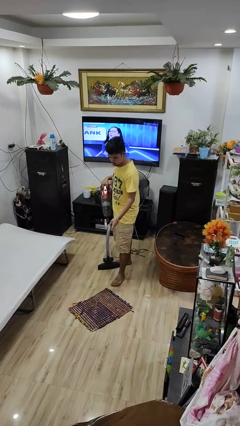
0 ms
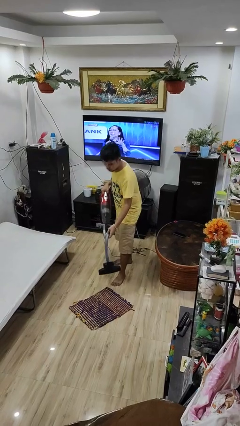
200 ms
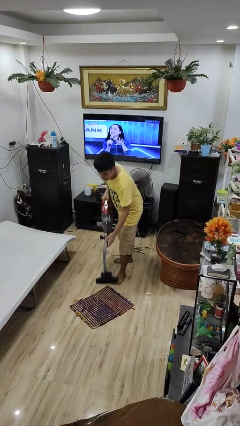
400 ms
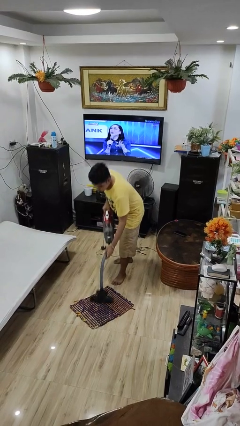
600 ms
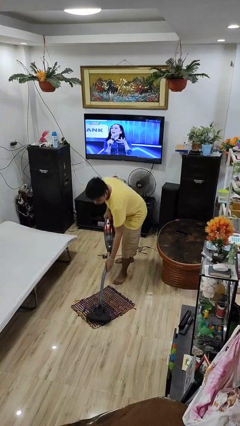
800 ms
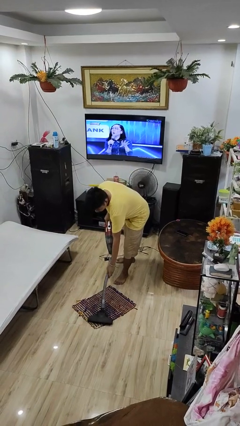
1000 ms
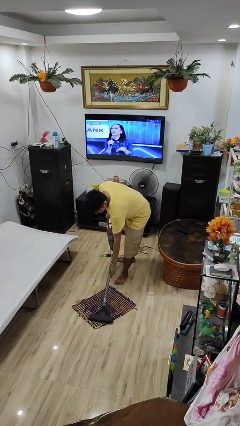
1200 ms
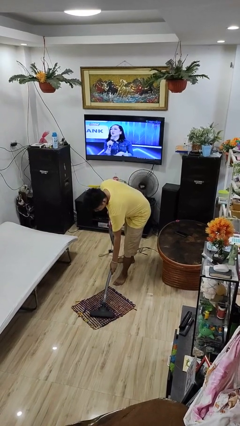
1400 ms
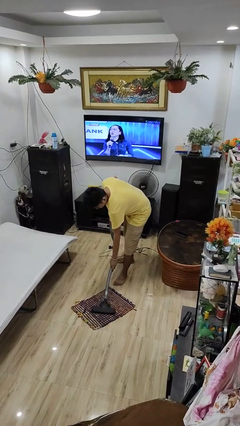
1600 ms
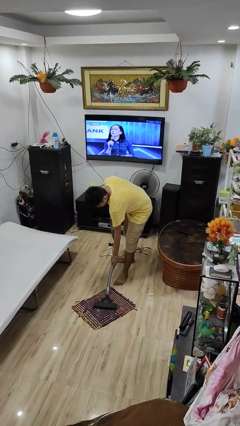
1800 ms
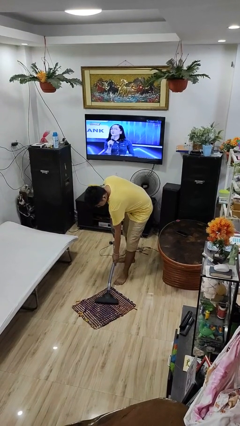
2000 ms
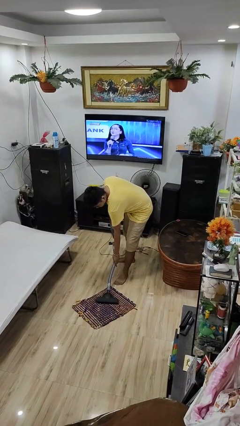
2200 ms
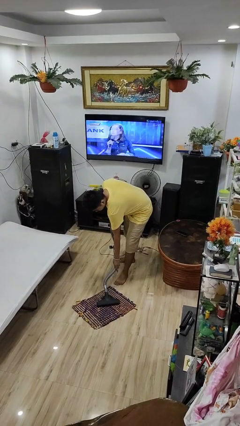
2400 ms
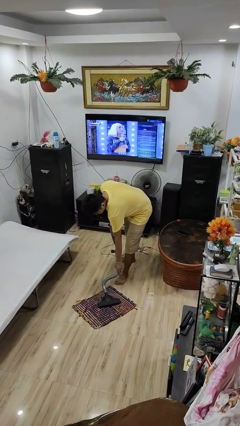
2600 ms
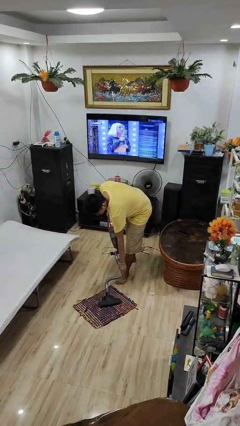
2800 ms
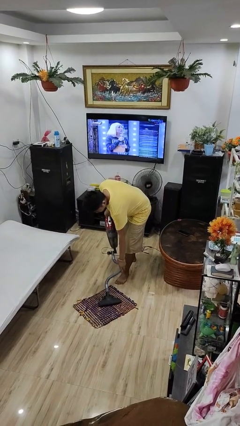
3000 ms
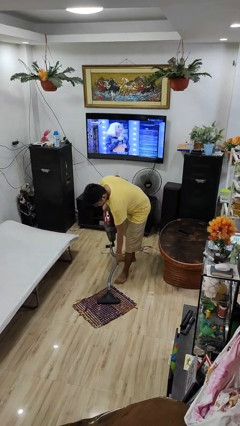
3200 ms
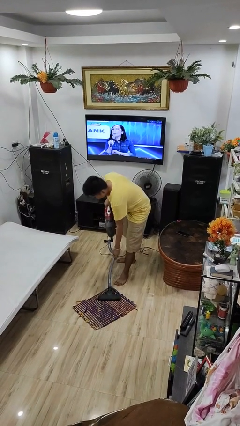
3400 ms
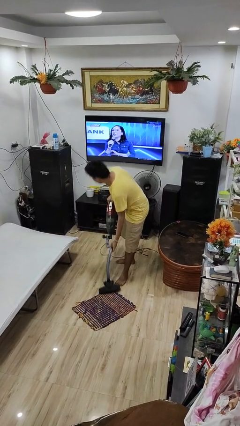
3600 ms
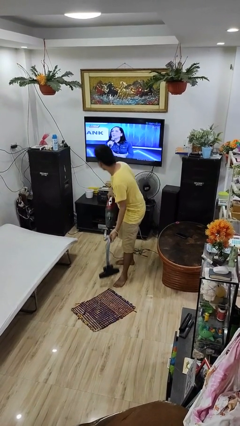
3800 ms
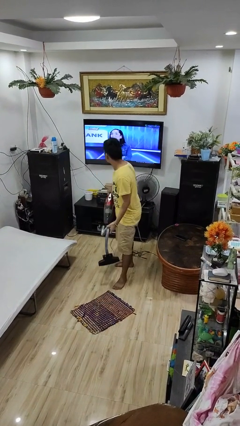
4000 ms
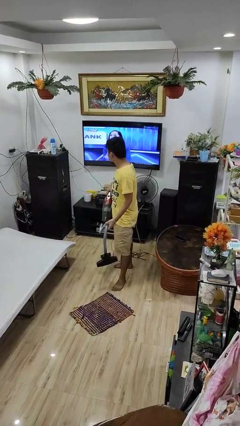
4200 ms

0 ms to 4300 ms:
person vacuums carpet

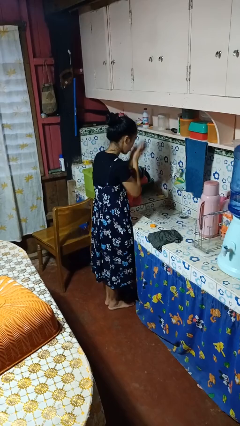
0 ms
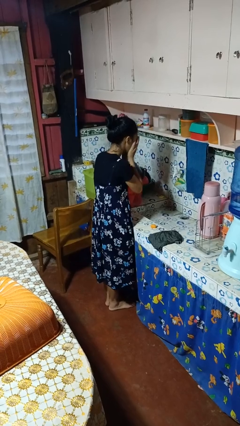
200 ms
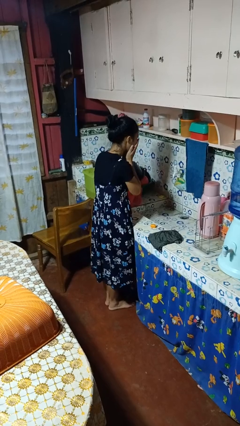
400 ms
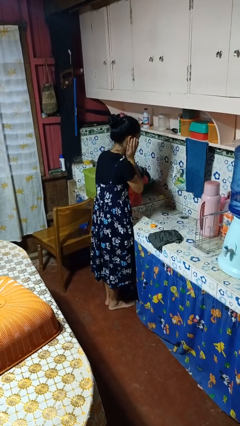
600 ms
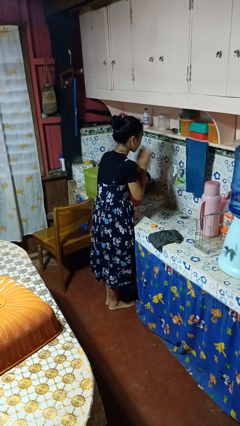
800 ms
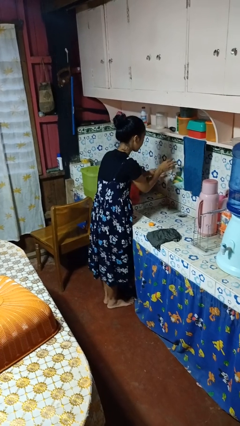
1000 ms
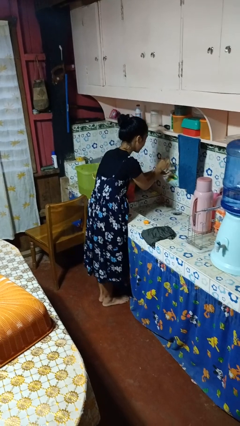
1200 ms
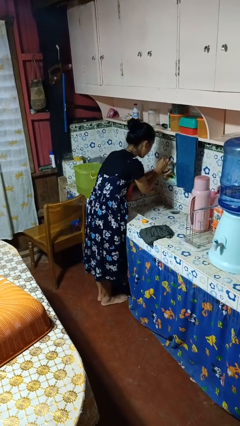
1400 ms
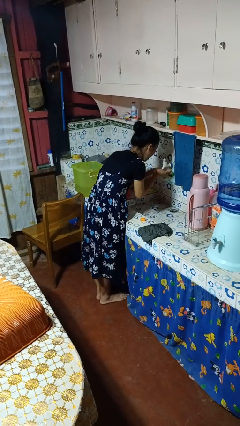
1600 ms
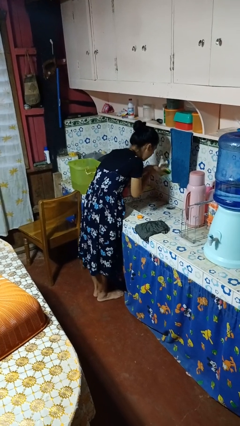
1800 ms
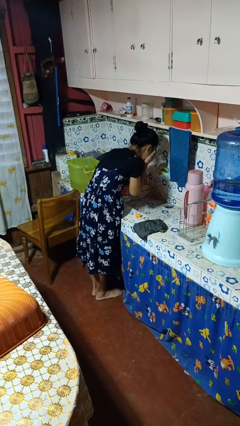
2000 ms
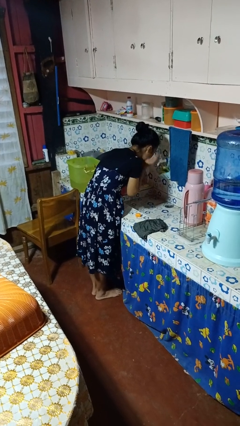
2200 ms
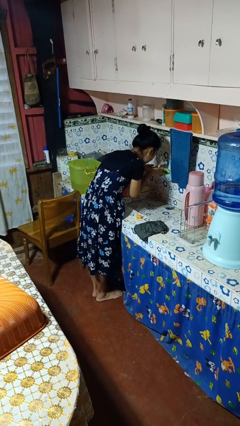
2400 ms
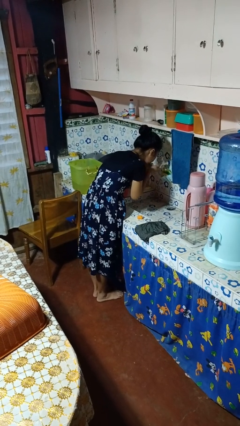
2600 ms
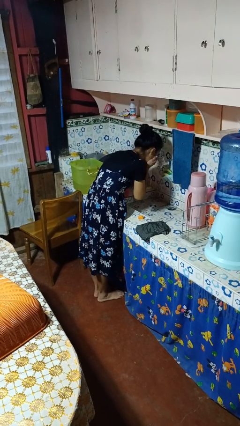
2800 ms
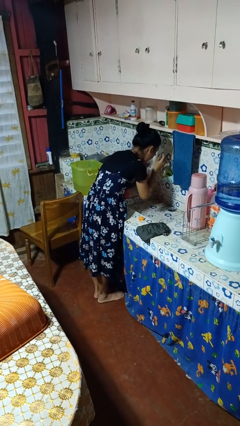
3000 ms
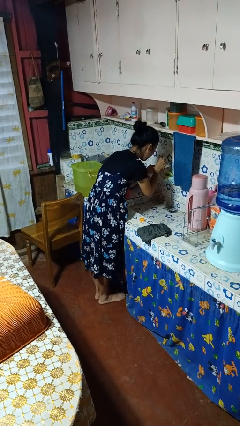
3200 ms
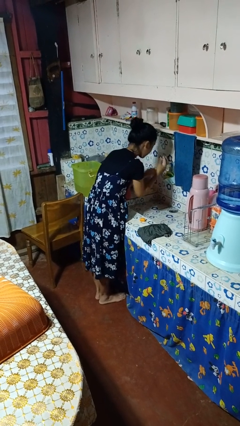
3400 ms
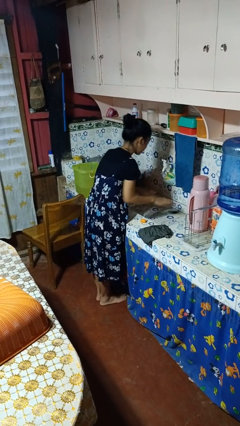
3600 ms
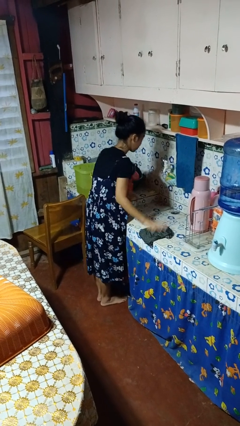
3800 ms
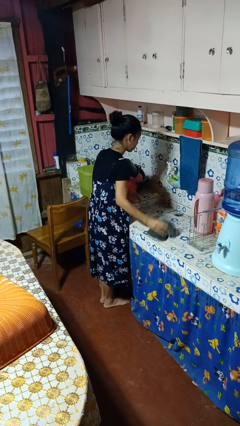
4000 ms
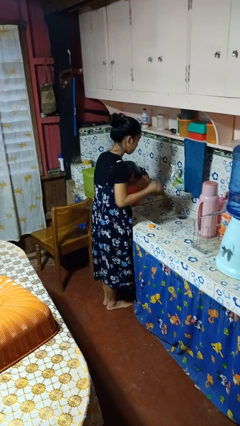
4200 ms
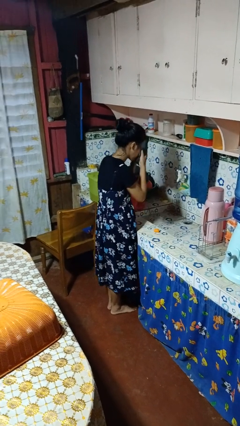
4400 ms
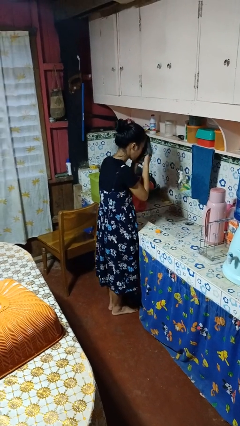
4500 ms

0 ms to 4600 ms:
person washes face

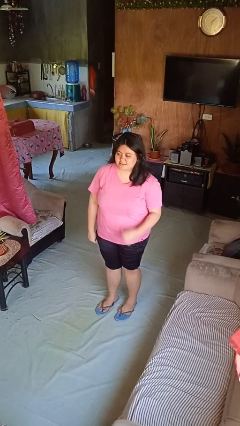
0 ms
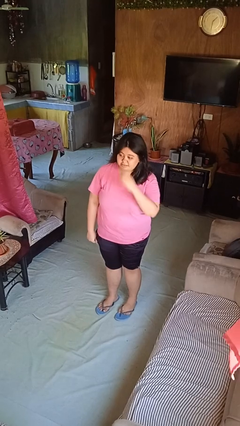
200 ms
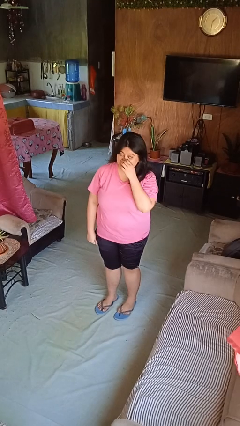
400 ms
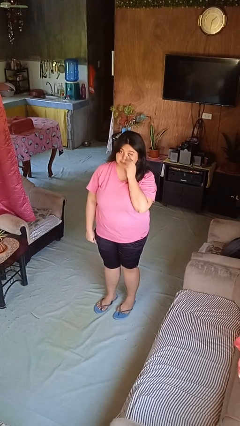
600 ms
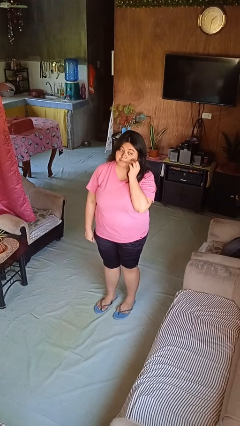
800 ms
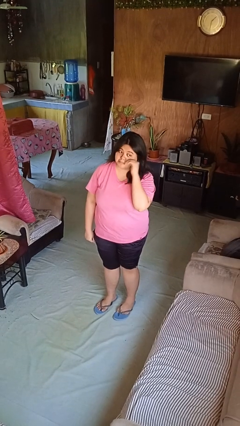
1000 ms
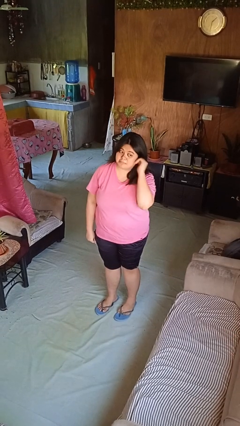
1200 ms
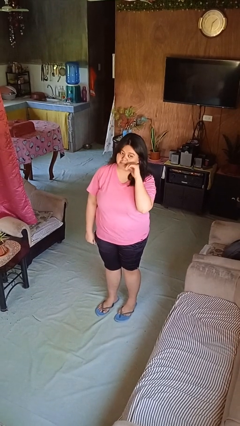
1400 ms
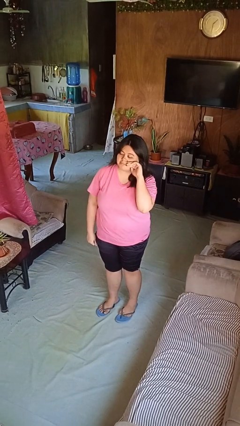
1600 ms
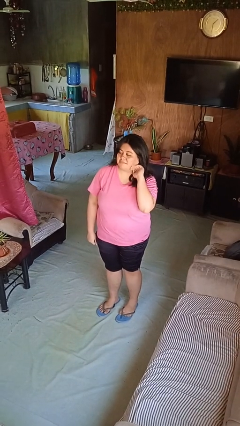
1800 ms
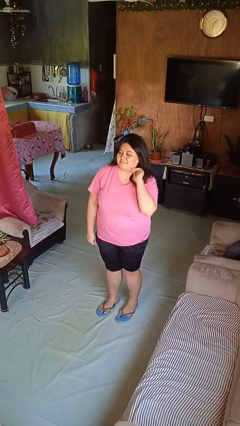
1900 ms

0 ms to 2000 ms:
person scratches face

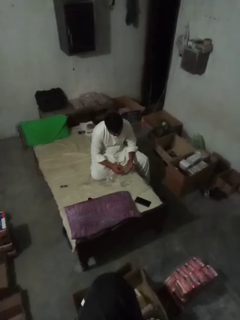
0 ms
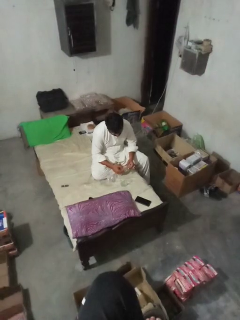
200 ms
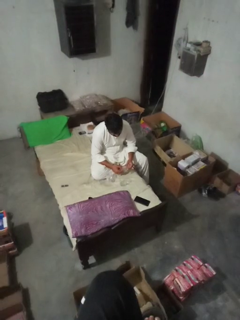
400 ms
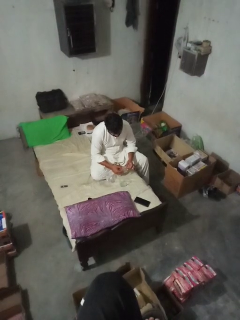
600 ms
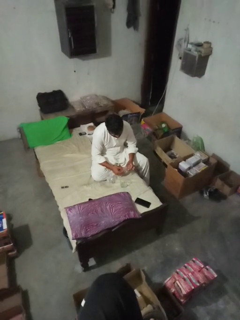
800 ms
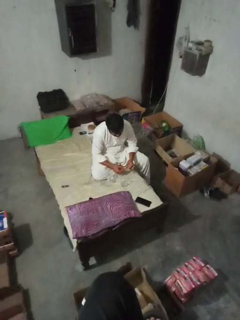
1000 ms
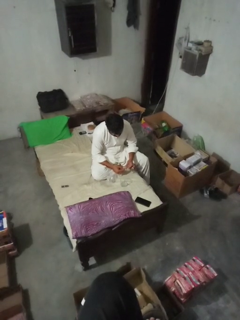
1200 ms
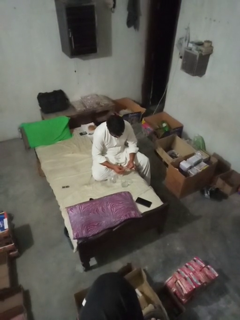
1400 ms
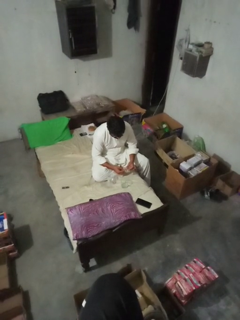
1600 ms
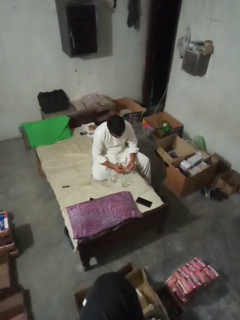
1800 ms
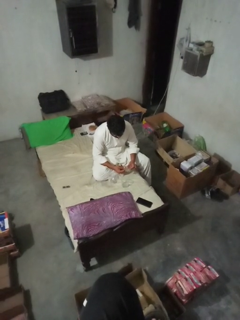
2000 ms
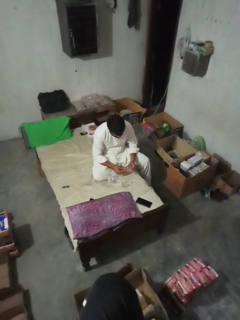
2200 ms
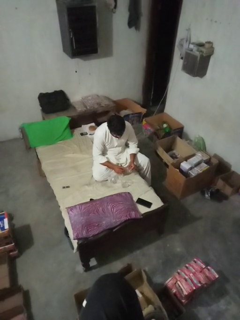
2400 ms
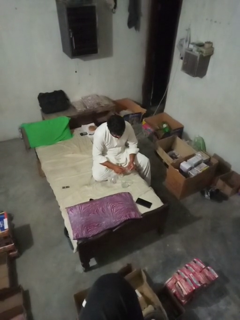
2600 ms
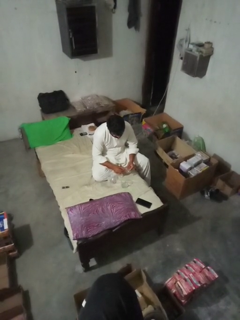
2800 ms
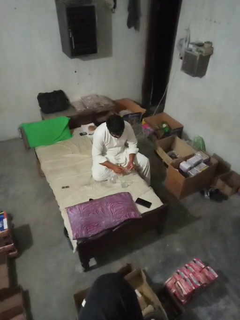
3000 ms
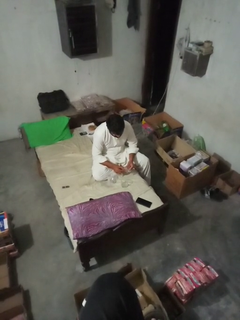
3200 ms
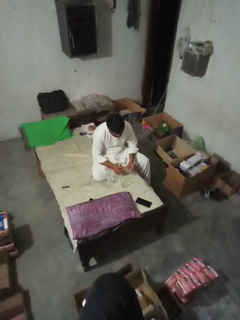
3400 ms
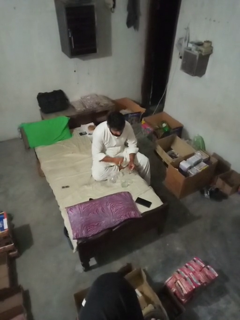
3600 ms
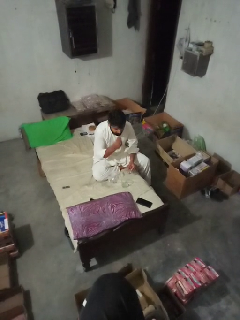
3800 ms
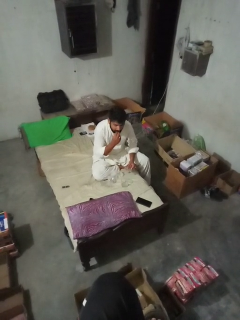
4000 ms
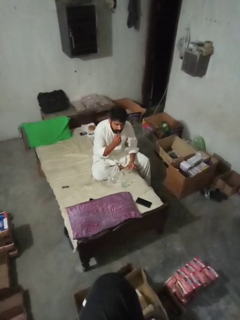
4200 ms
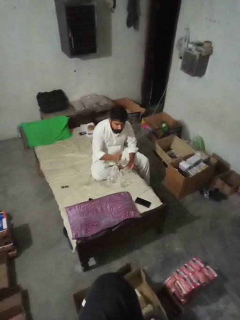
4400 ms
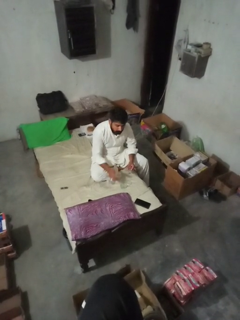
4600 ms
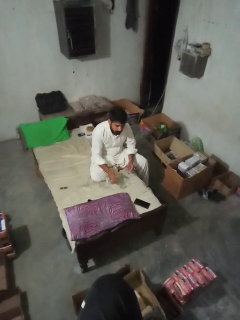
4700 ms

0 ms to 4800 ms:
person takes medicine pills

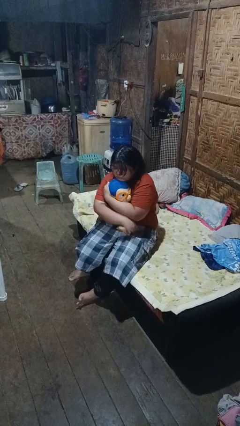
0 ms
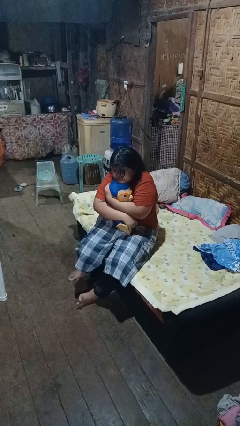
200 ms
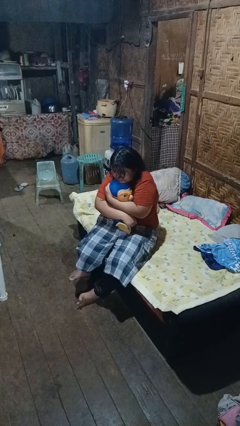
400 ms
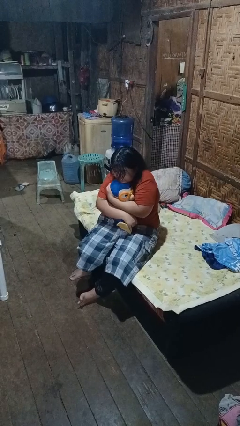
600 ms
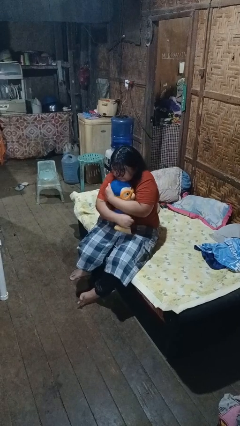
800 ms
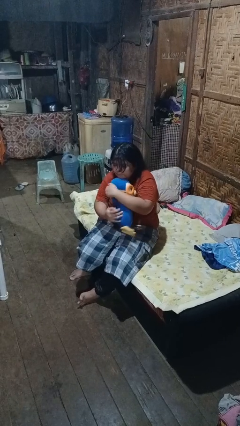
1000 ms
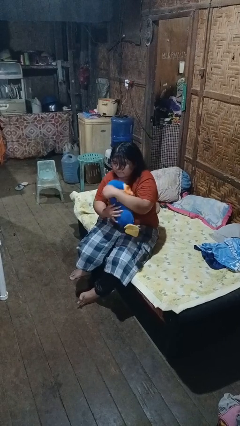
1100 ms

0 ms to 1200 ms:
person hugs stuffed animal

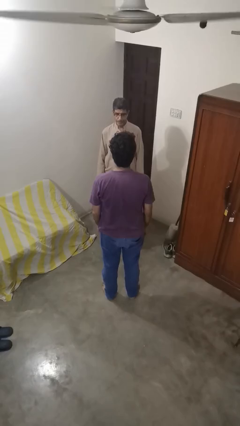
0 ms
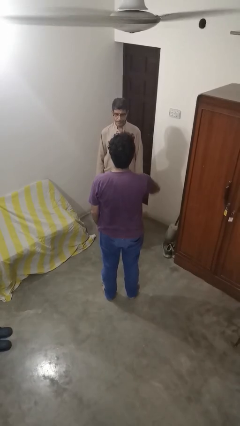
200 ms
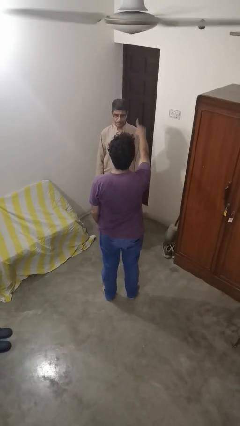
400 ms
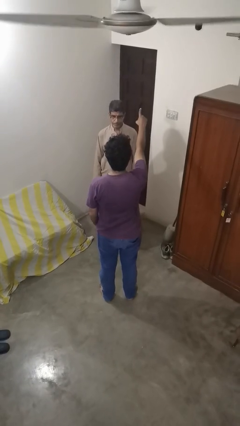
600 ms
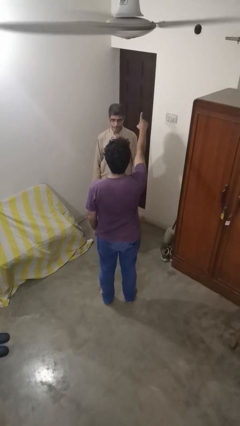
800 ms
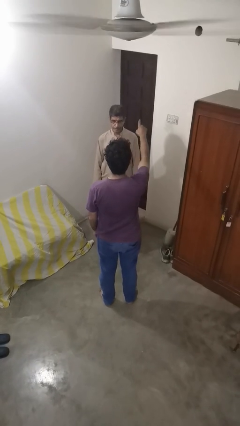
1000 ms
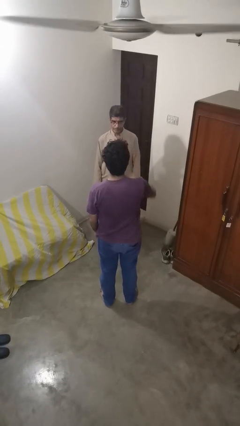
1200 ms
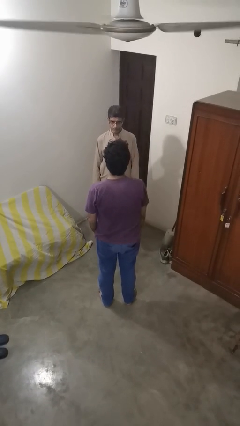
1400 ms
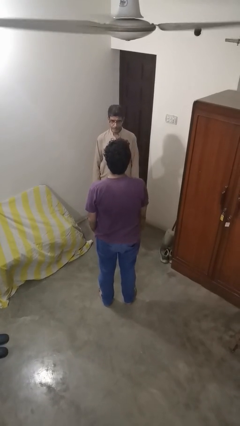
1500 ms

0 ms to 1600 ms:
person shoves person
